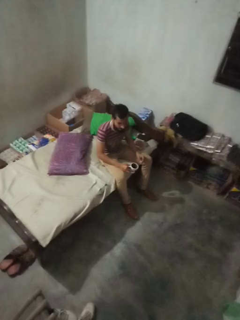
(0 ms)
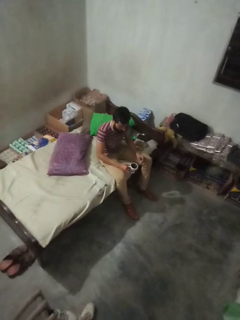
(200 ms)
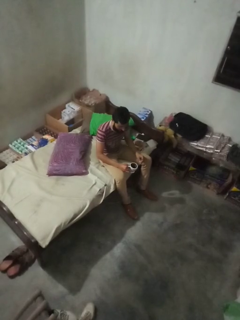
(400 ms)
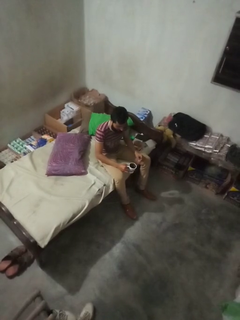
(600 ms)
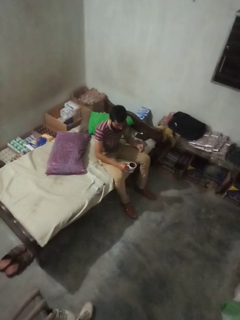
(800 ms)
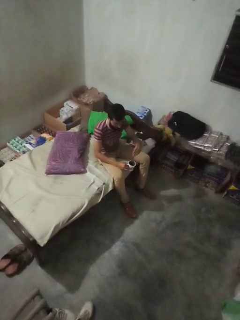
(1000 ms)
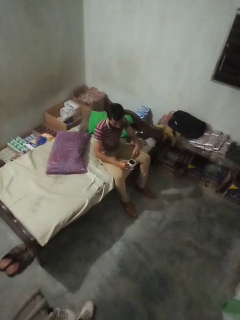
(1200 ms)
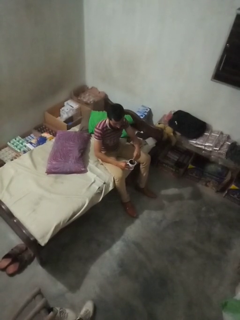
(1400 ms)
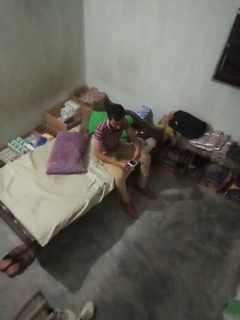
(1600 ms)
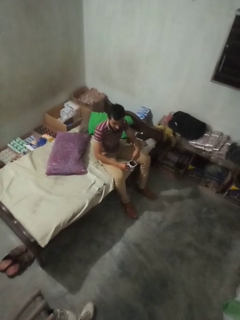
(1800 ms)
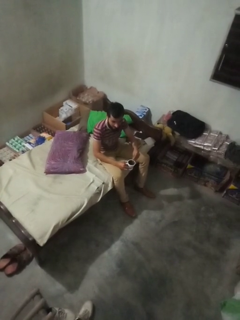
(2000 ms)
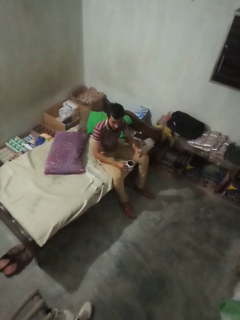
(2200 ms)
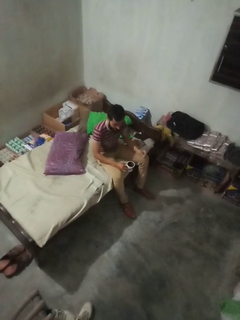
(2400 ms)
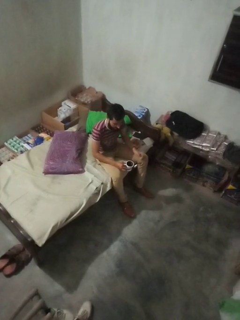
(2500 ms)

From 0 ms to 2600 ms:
person stirs mug

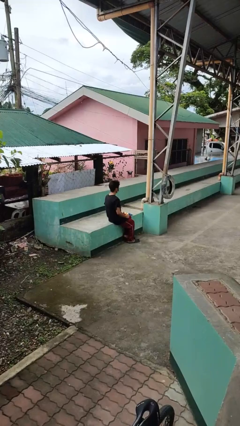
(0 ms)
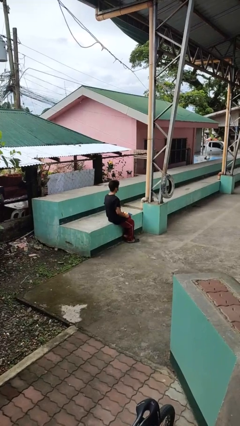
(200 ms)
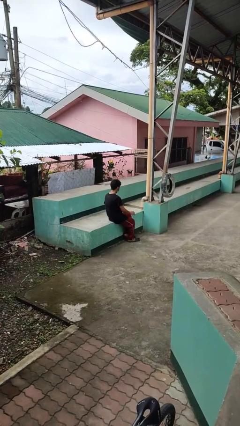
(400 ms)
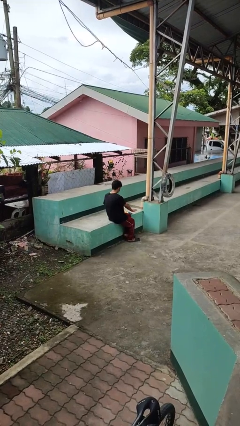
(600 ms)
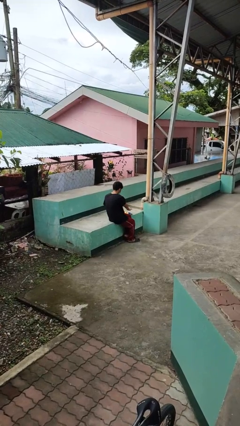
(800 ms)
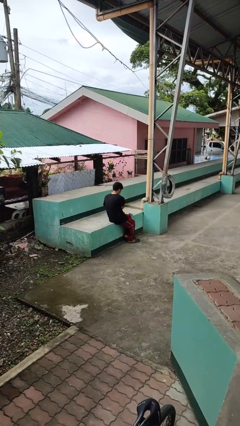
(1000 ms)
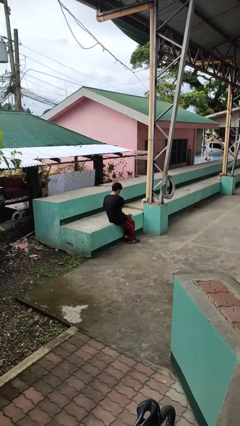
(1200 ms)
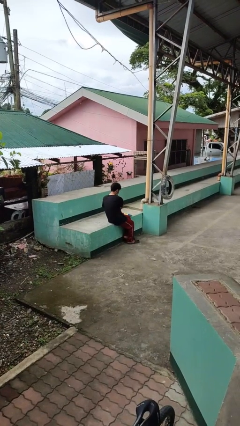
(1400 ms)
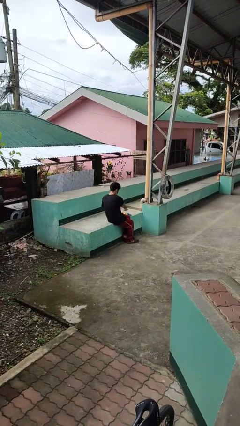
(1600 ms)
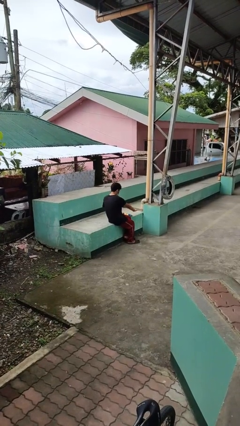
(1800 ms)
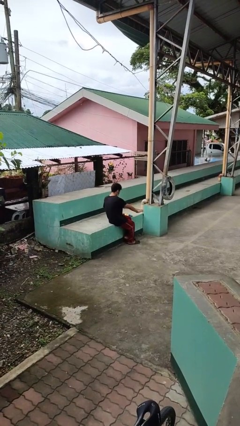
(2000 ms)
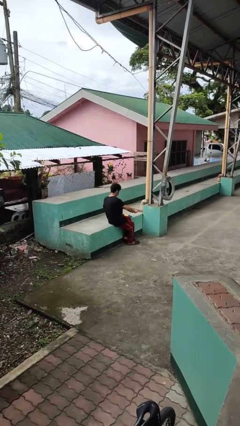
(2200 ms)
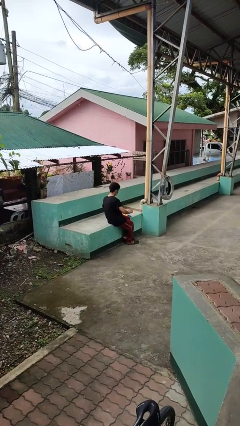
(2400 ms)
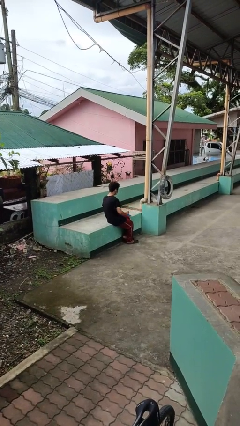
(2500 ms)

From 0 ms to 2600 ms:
person waves hand over object

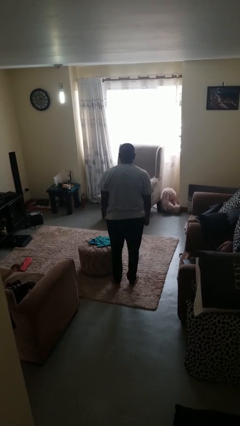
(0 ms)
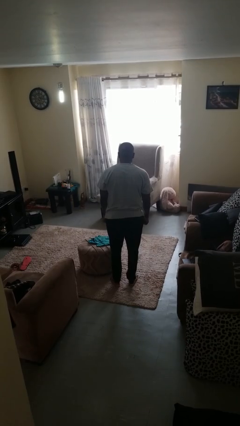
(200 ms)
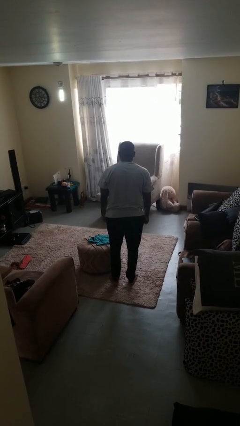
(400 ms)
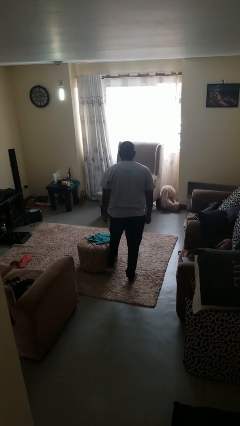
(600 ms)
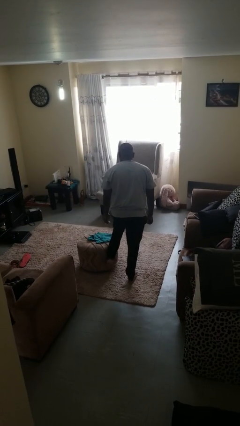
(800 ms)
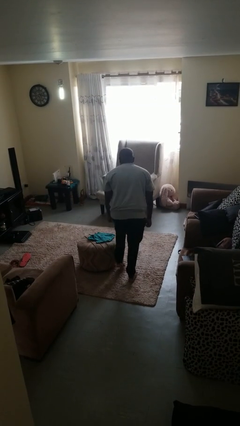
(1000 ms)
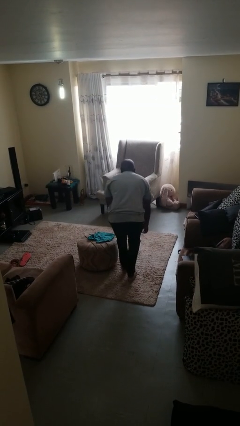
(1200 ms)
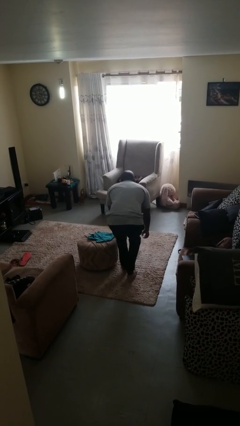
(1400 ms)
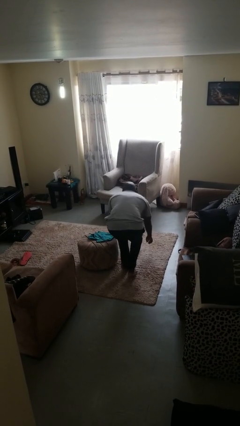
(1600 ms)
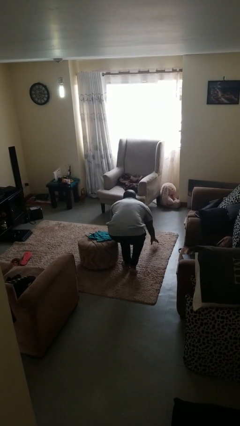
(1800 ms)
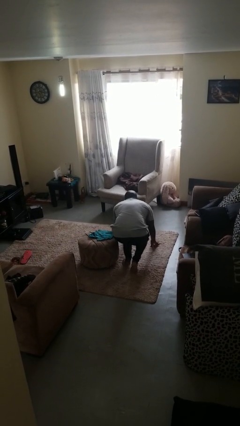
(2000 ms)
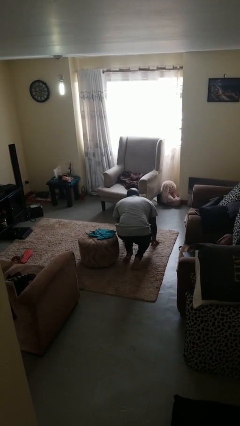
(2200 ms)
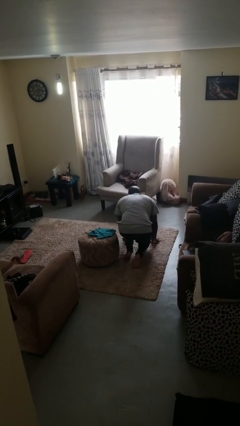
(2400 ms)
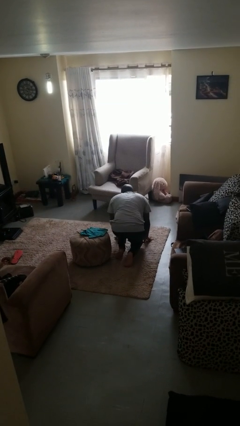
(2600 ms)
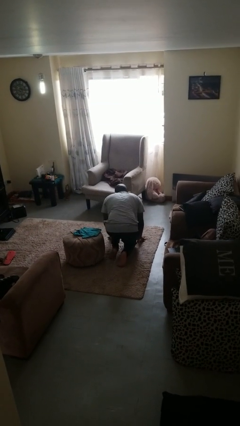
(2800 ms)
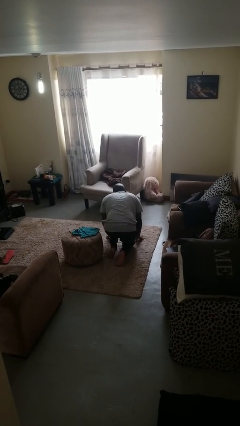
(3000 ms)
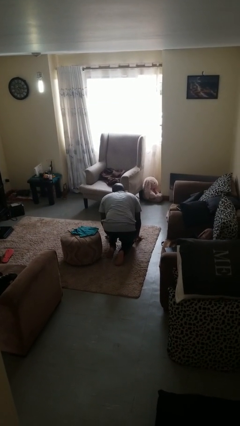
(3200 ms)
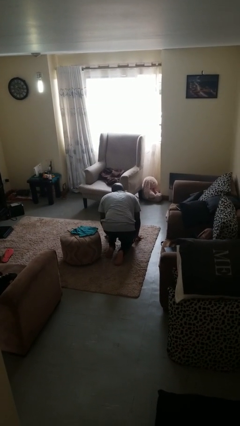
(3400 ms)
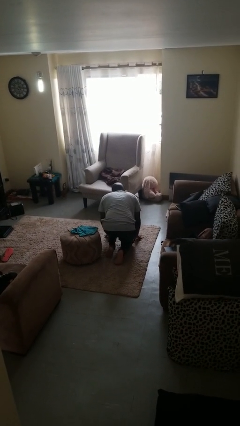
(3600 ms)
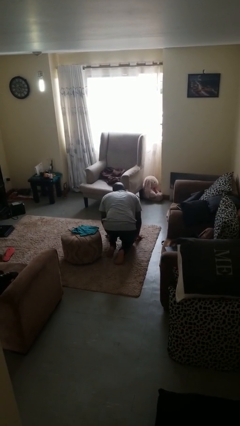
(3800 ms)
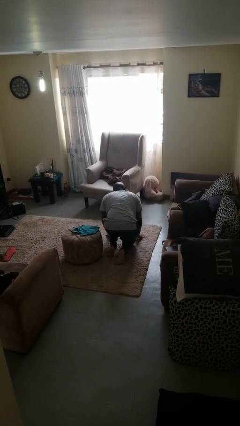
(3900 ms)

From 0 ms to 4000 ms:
person trips on object on floor

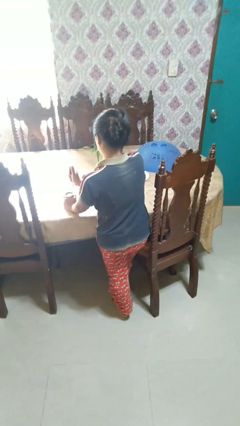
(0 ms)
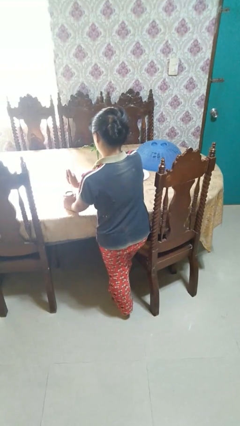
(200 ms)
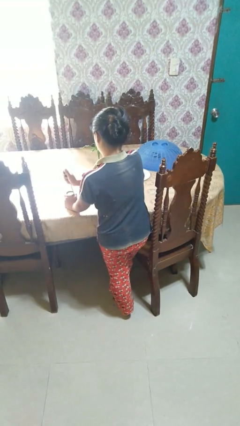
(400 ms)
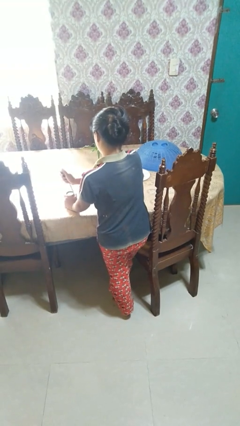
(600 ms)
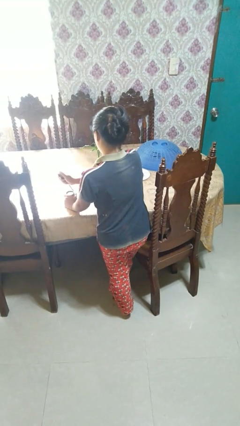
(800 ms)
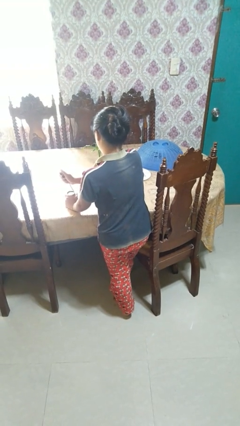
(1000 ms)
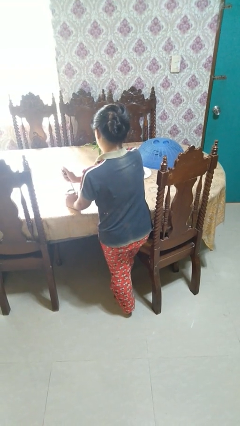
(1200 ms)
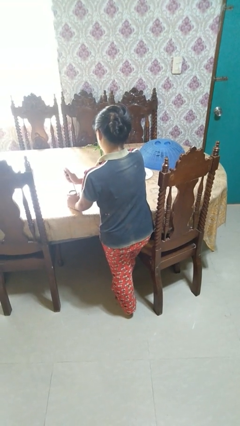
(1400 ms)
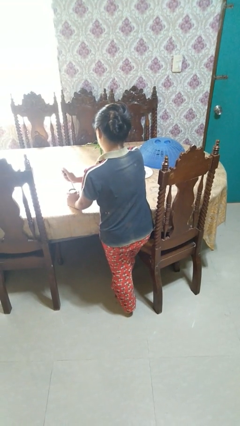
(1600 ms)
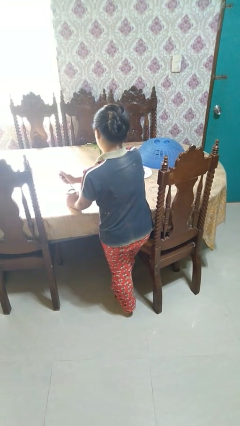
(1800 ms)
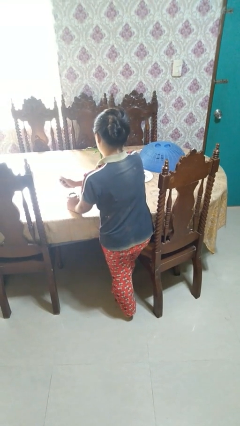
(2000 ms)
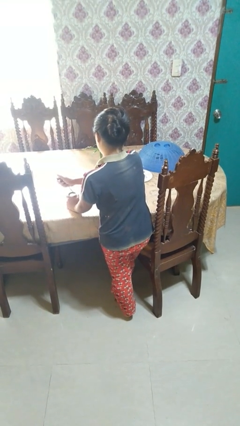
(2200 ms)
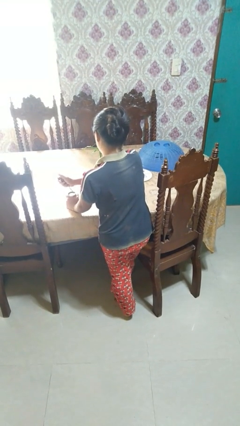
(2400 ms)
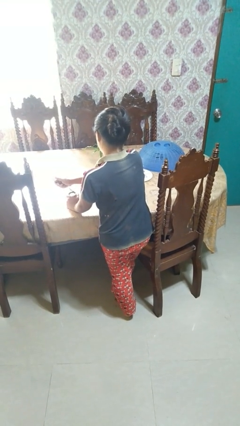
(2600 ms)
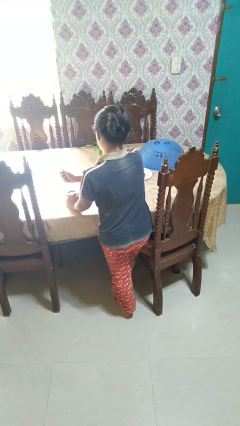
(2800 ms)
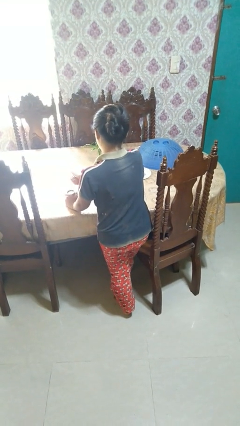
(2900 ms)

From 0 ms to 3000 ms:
person opens can with can opener

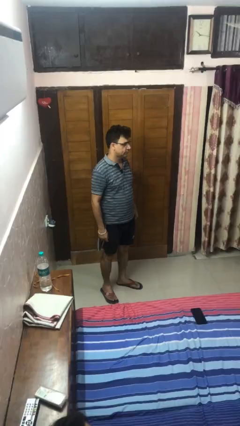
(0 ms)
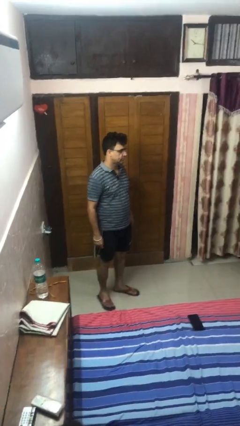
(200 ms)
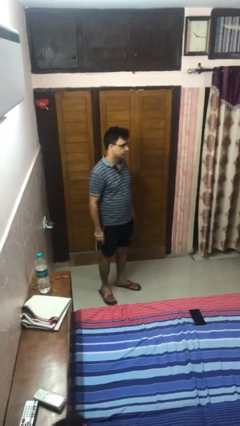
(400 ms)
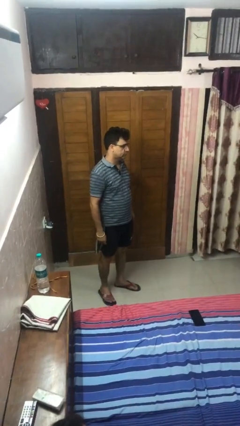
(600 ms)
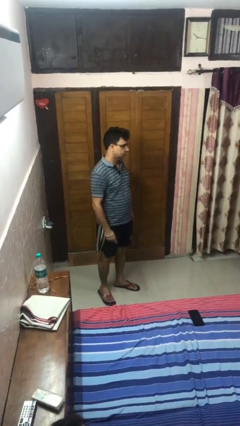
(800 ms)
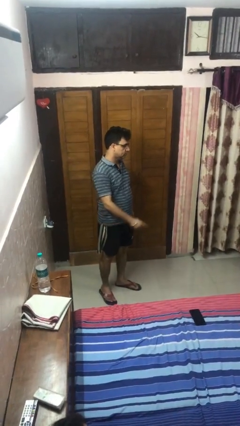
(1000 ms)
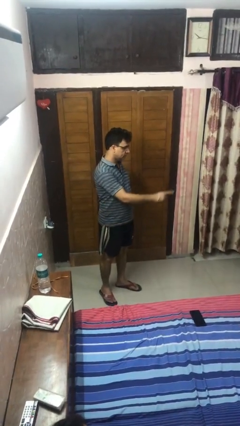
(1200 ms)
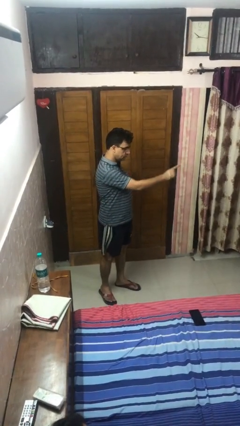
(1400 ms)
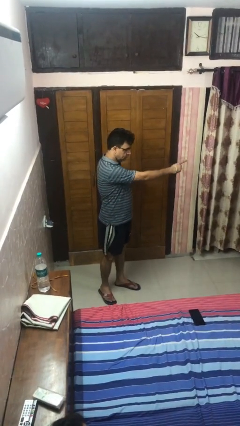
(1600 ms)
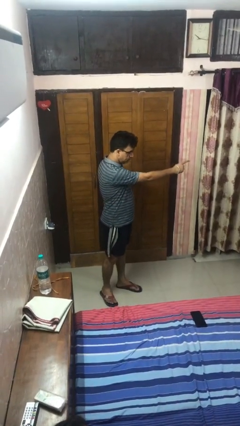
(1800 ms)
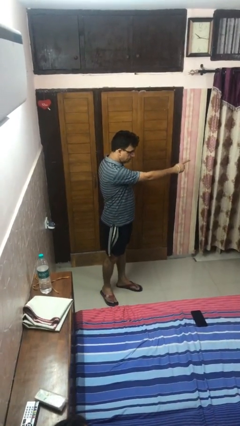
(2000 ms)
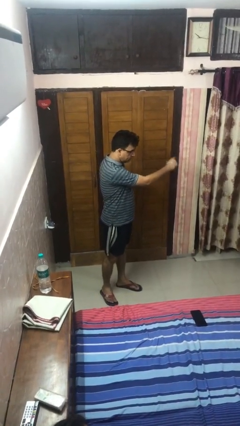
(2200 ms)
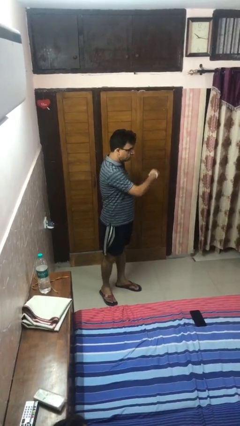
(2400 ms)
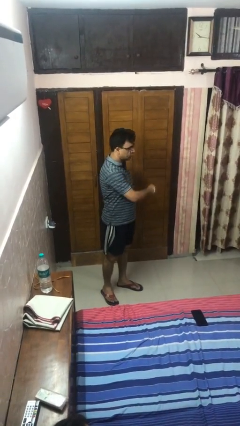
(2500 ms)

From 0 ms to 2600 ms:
person points at person

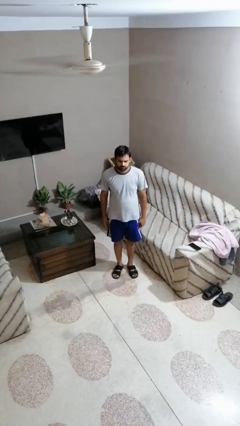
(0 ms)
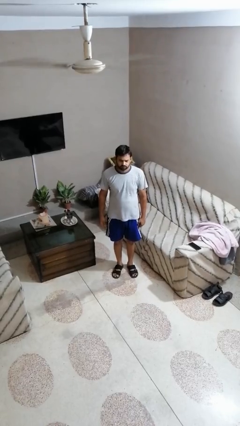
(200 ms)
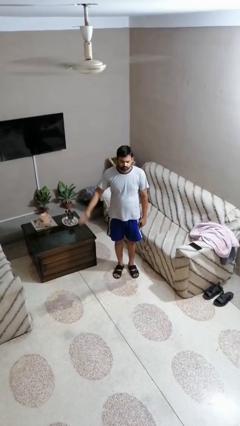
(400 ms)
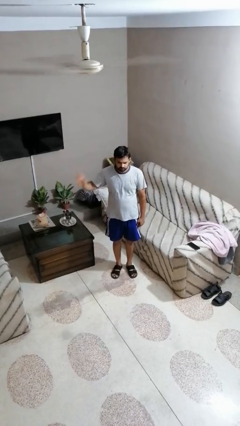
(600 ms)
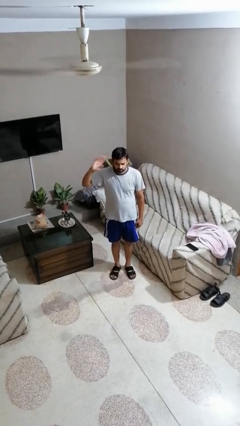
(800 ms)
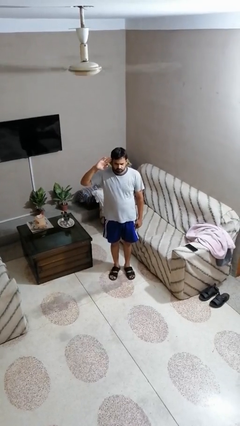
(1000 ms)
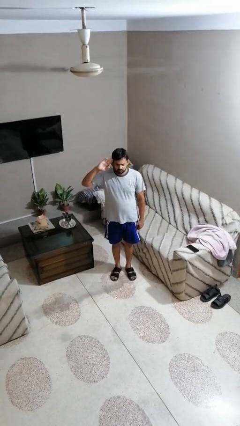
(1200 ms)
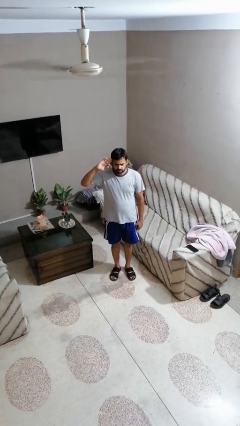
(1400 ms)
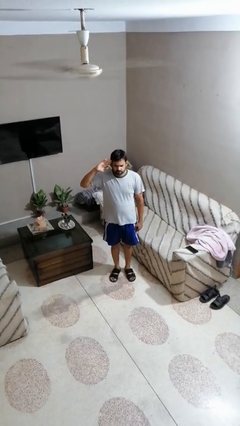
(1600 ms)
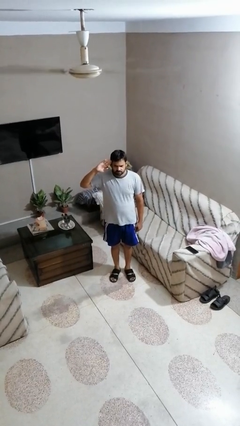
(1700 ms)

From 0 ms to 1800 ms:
person salutes

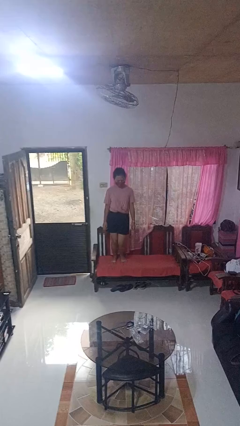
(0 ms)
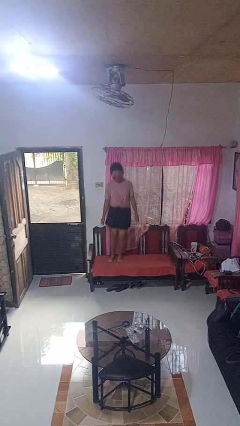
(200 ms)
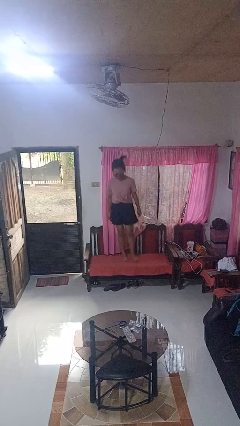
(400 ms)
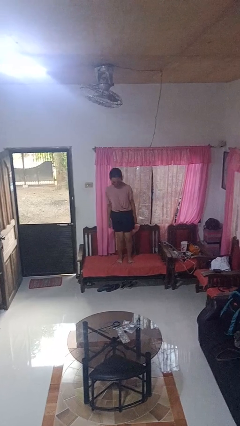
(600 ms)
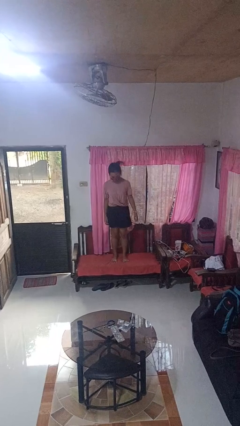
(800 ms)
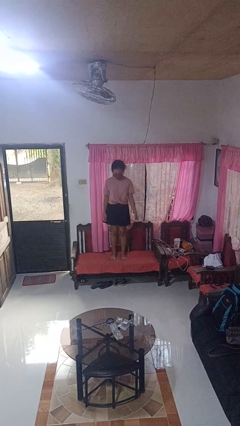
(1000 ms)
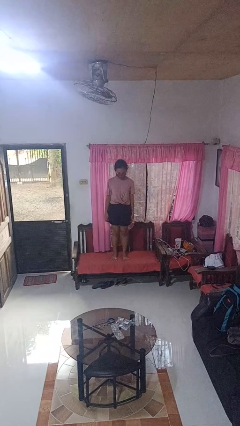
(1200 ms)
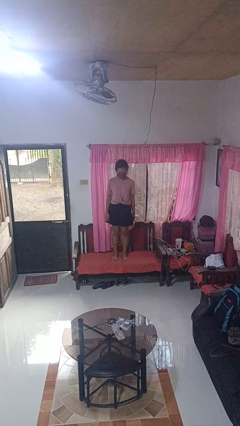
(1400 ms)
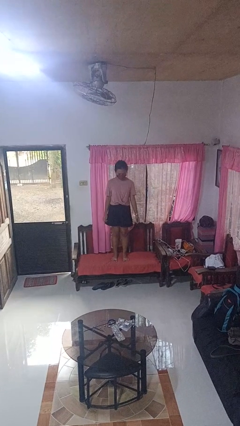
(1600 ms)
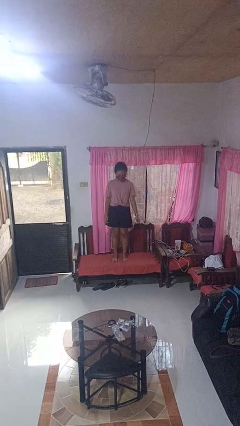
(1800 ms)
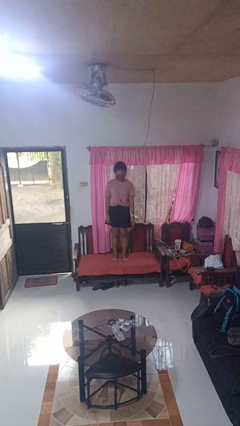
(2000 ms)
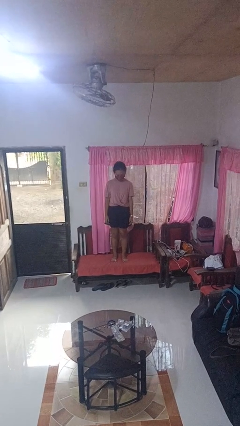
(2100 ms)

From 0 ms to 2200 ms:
person jumps on couch
